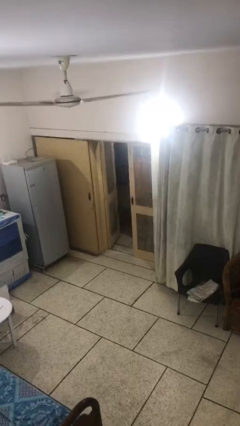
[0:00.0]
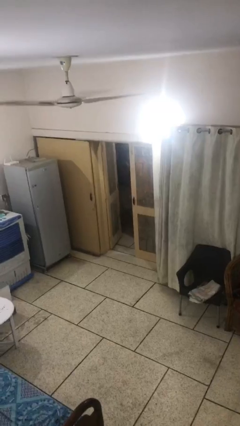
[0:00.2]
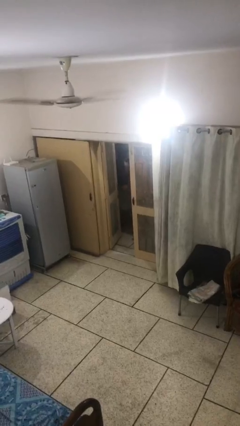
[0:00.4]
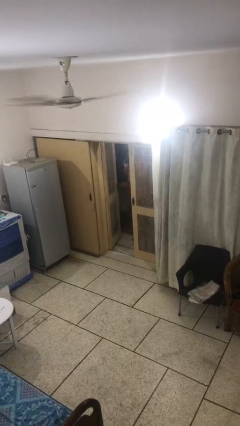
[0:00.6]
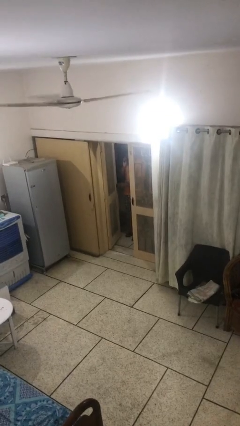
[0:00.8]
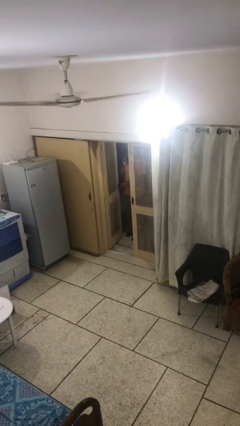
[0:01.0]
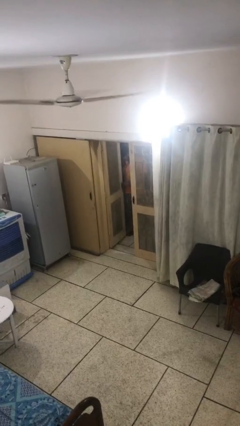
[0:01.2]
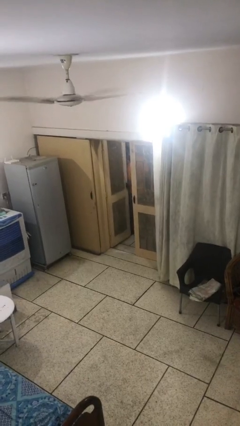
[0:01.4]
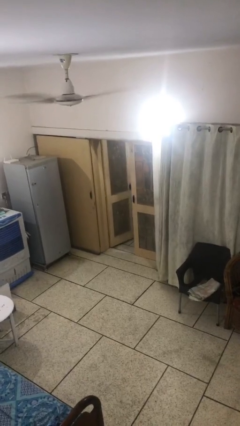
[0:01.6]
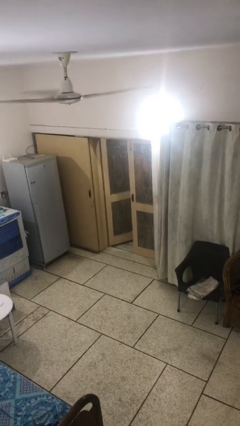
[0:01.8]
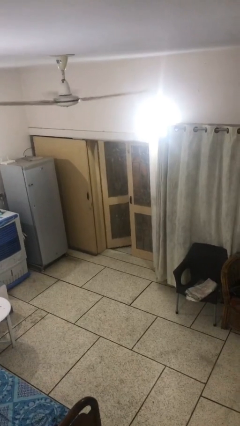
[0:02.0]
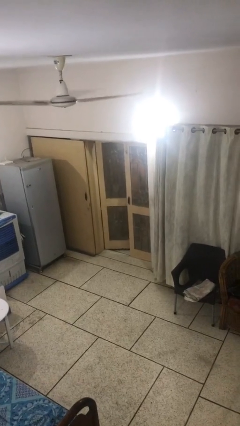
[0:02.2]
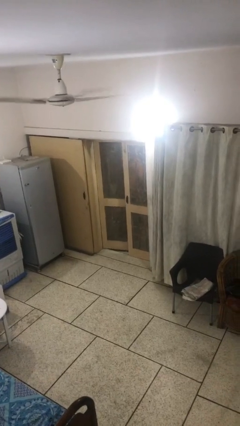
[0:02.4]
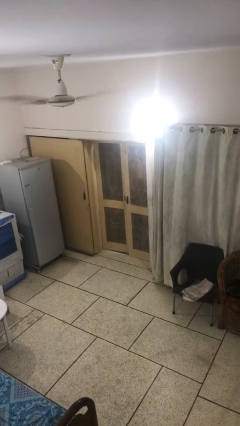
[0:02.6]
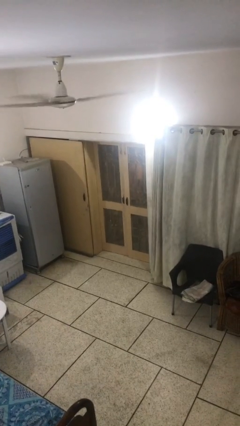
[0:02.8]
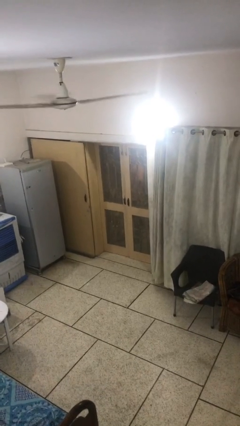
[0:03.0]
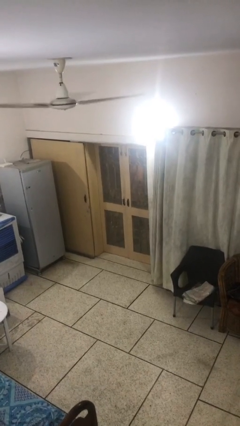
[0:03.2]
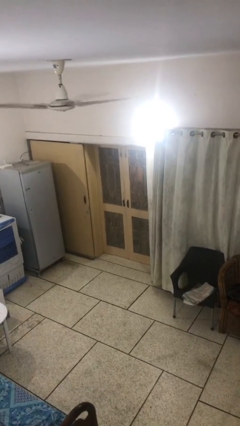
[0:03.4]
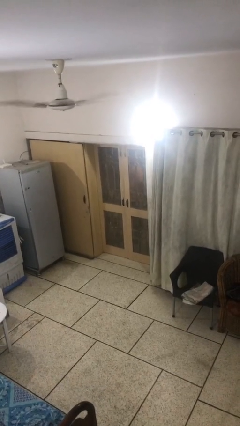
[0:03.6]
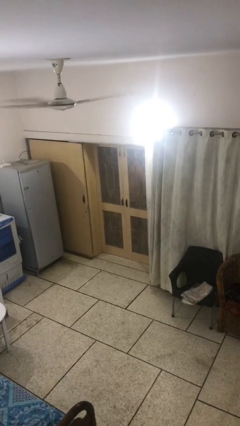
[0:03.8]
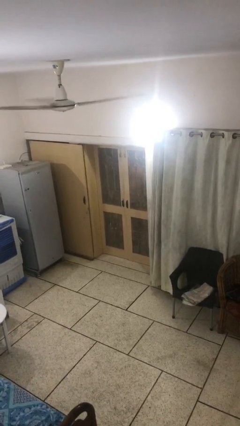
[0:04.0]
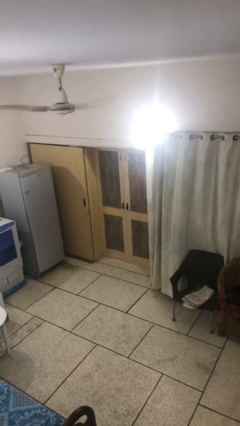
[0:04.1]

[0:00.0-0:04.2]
person closes facility door

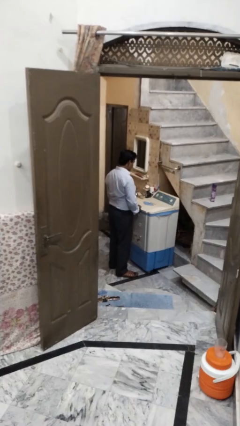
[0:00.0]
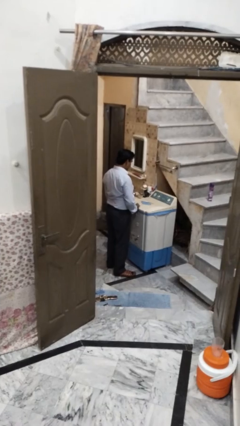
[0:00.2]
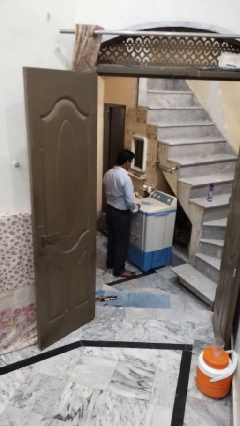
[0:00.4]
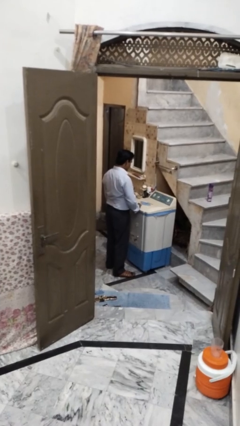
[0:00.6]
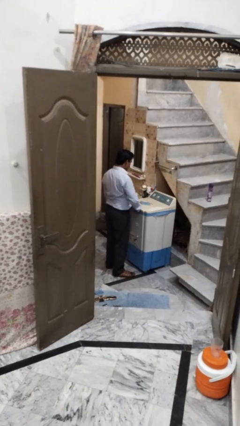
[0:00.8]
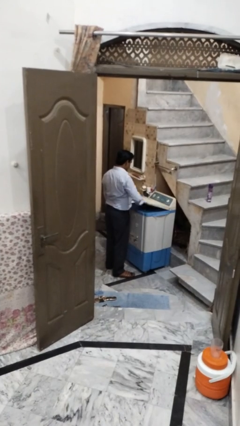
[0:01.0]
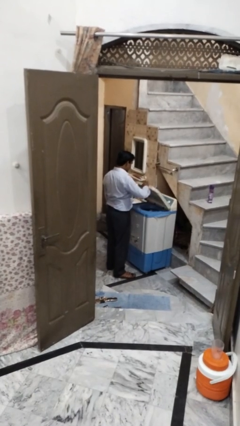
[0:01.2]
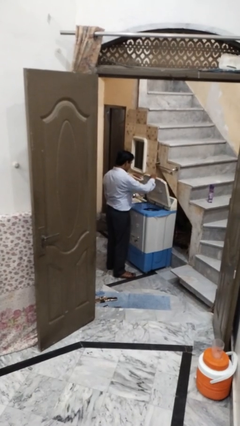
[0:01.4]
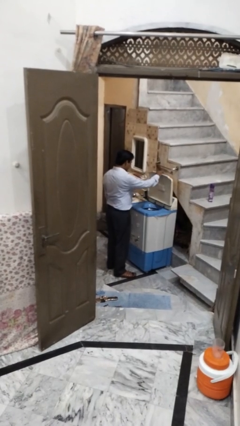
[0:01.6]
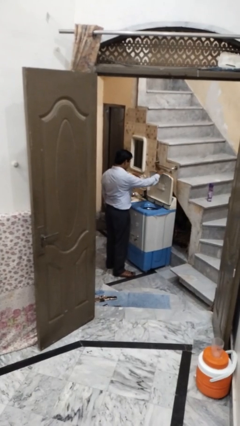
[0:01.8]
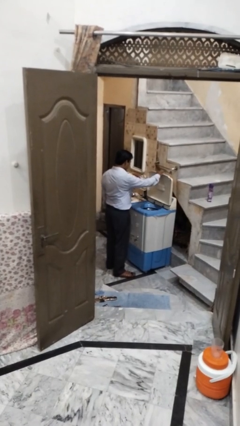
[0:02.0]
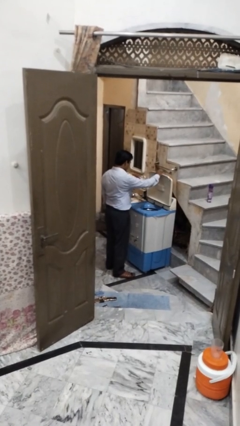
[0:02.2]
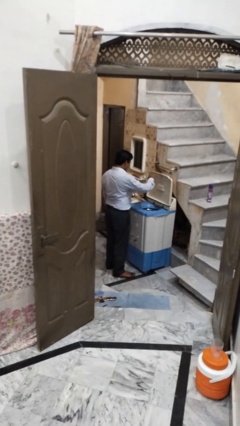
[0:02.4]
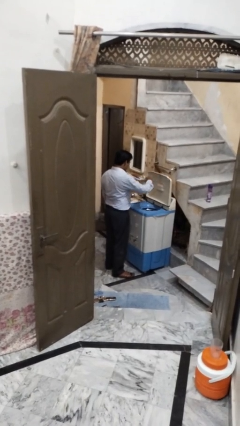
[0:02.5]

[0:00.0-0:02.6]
person opens clothes washer

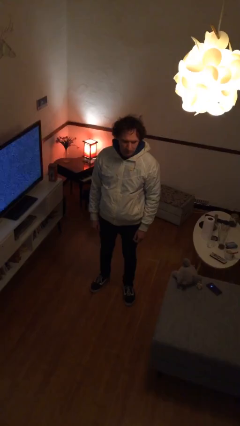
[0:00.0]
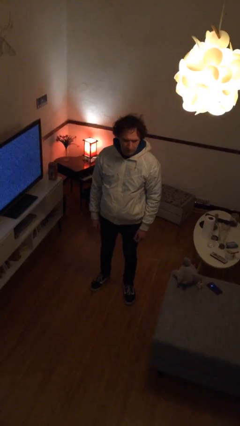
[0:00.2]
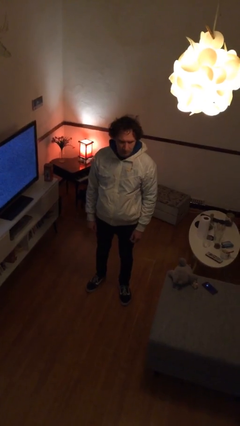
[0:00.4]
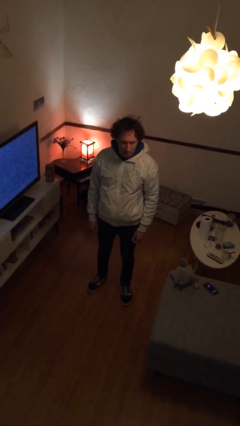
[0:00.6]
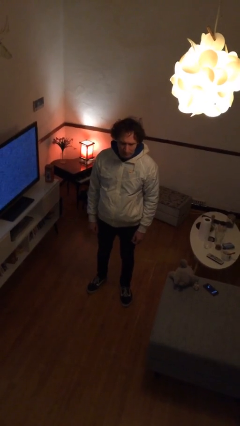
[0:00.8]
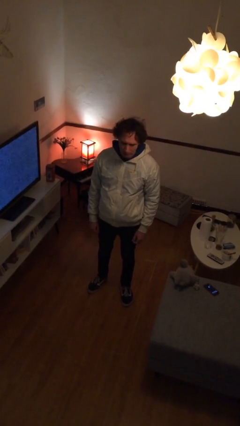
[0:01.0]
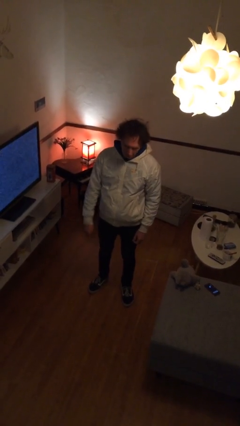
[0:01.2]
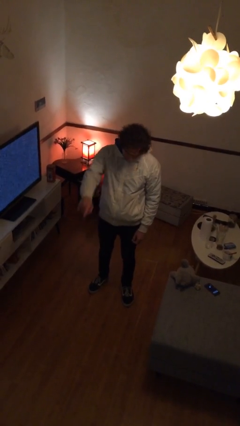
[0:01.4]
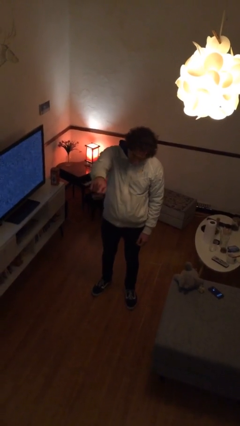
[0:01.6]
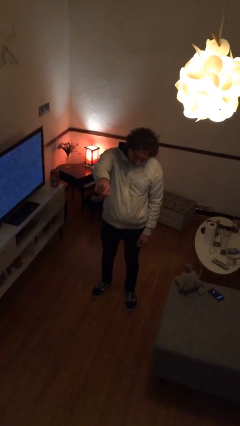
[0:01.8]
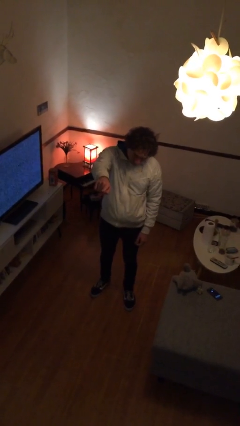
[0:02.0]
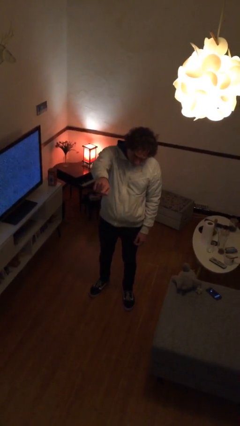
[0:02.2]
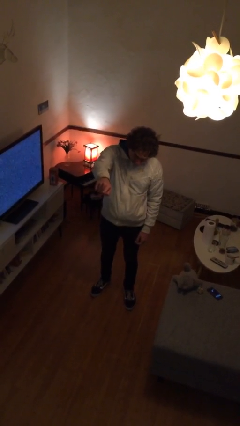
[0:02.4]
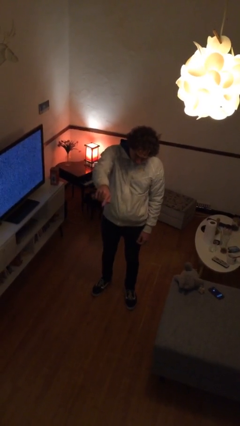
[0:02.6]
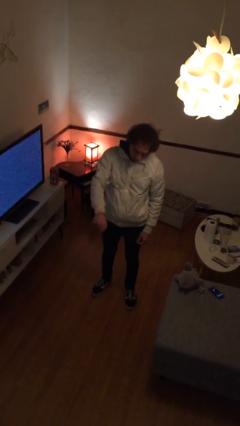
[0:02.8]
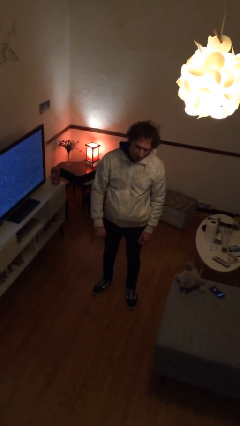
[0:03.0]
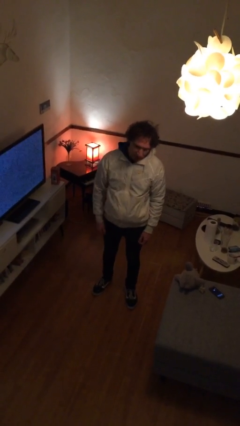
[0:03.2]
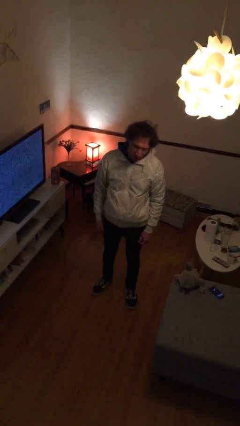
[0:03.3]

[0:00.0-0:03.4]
person points at person

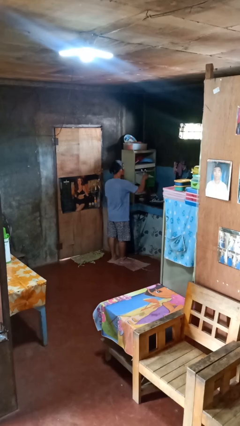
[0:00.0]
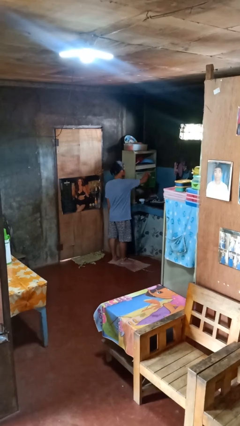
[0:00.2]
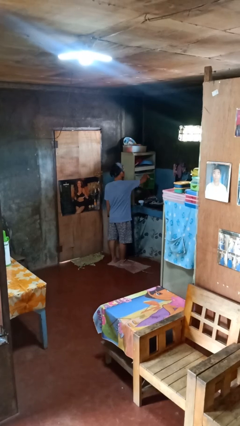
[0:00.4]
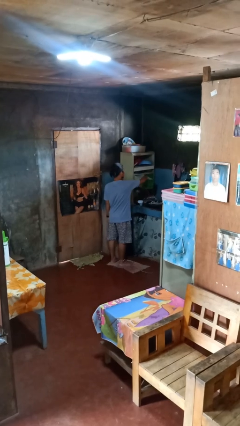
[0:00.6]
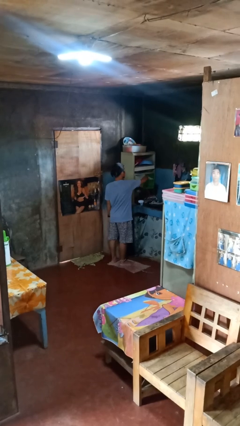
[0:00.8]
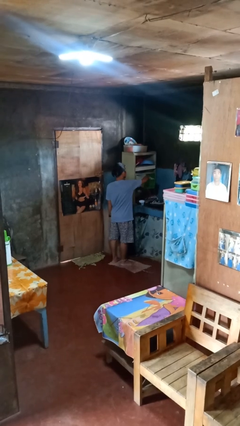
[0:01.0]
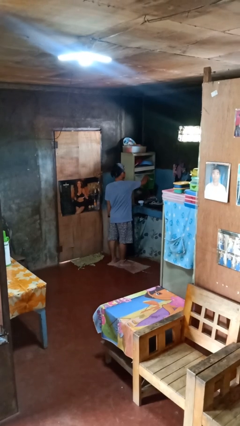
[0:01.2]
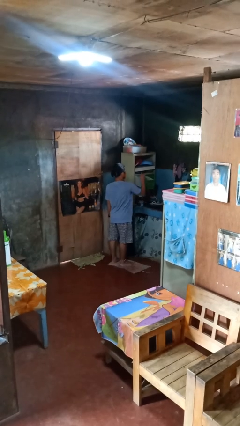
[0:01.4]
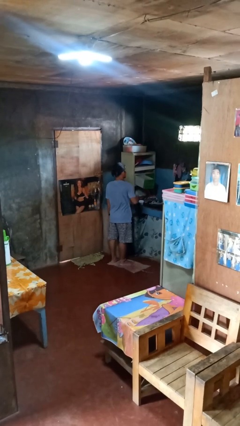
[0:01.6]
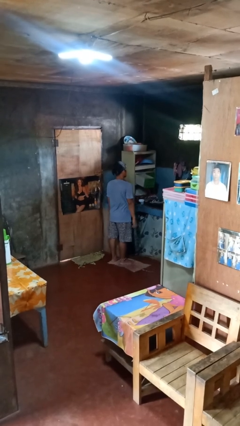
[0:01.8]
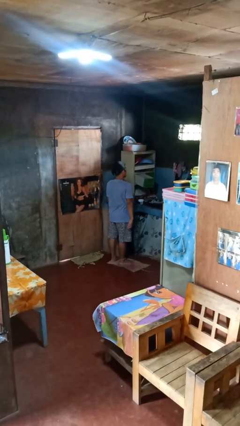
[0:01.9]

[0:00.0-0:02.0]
person puts object into kitchen drawer

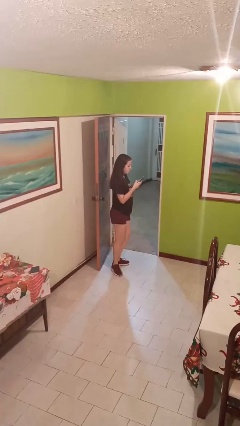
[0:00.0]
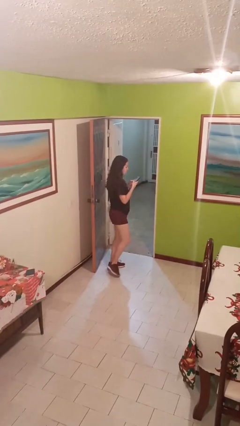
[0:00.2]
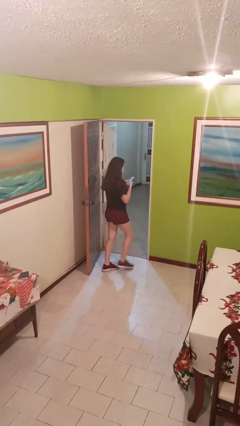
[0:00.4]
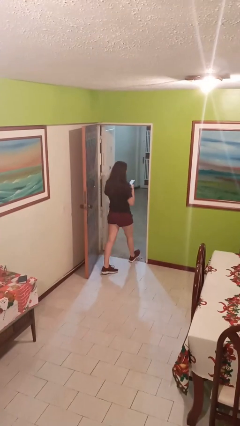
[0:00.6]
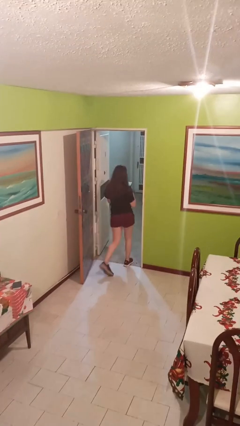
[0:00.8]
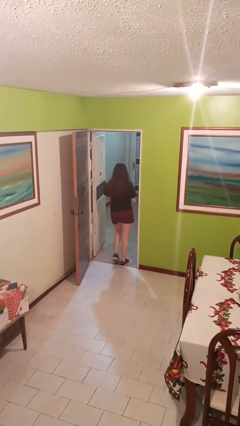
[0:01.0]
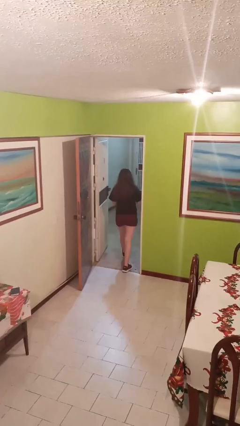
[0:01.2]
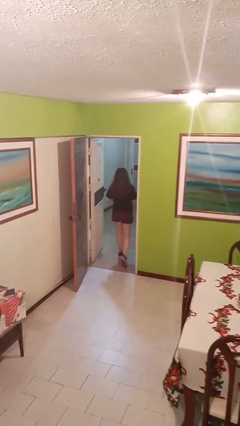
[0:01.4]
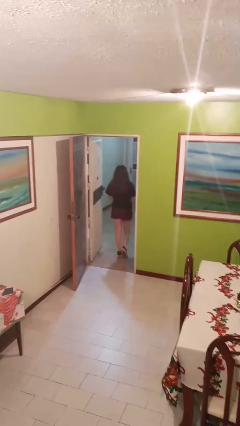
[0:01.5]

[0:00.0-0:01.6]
person exits scene through structure

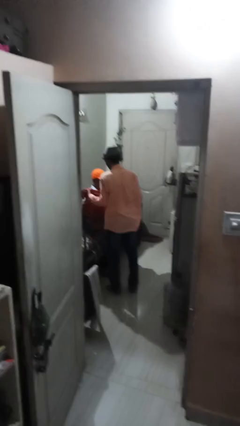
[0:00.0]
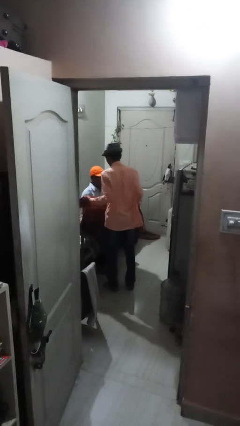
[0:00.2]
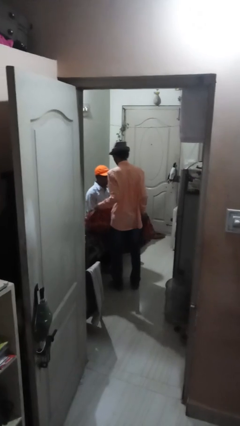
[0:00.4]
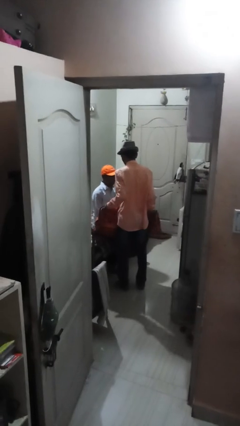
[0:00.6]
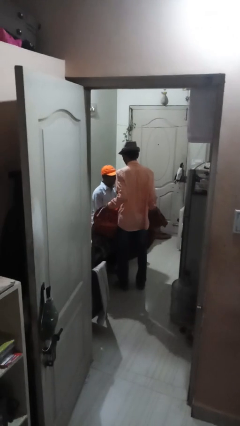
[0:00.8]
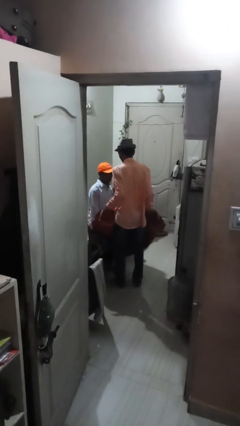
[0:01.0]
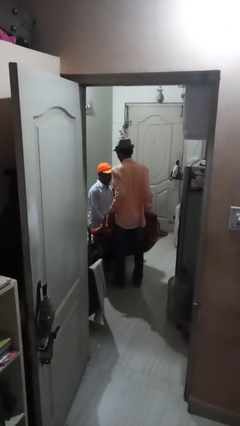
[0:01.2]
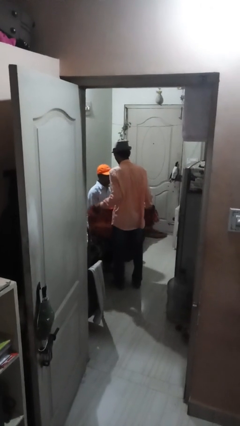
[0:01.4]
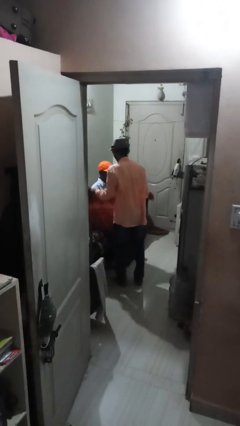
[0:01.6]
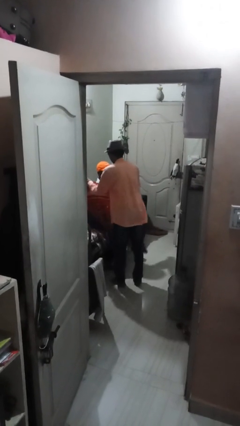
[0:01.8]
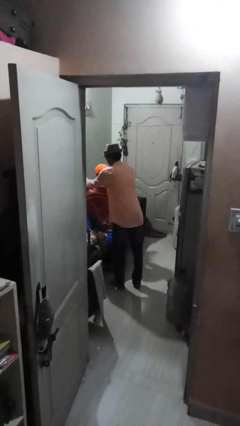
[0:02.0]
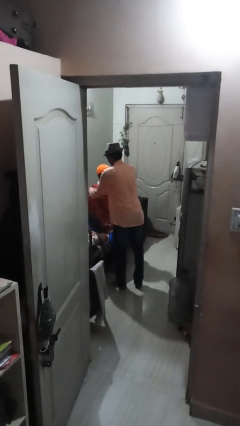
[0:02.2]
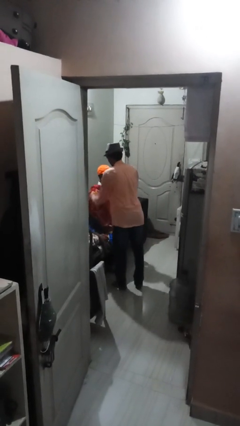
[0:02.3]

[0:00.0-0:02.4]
person uncovers friend with blanket

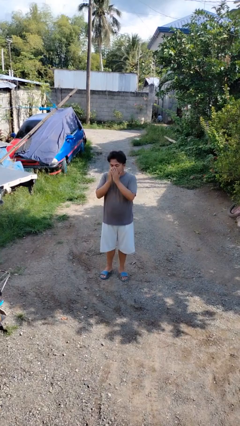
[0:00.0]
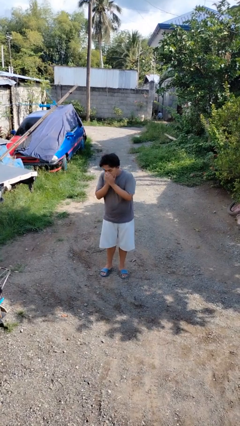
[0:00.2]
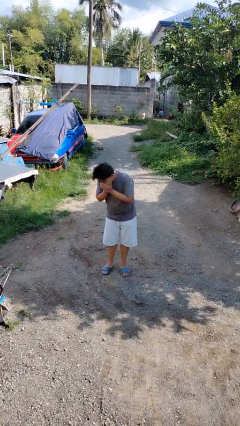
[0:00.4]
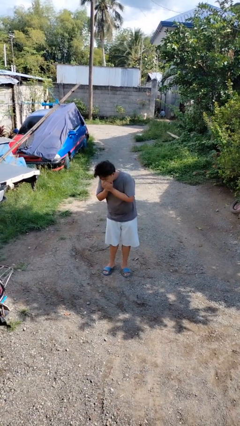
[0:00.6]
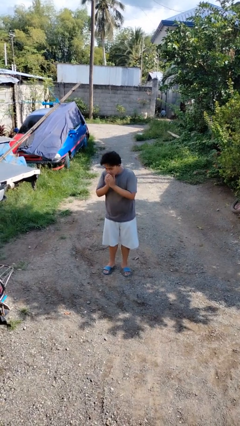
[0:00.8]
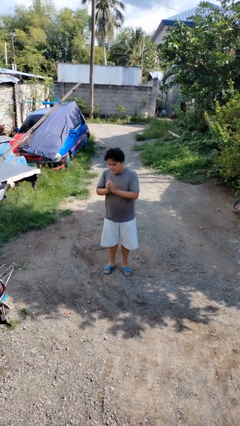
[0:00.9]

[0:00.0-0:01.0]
person sneezes into hand
